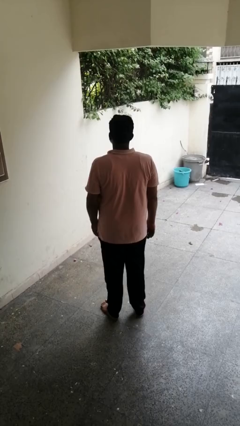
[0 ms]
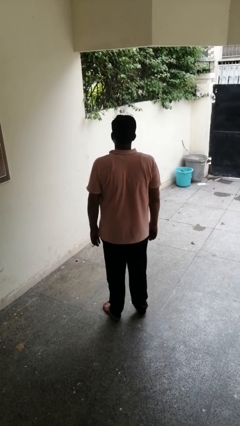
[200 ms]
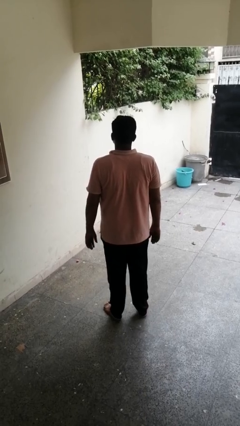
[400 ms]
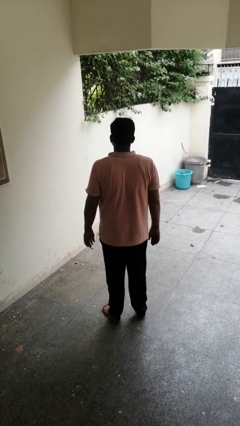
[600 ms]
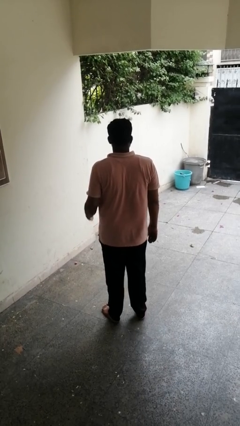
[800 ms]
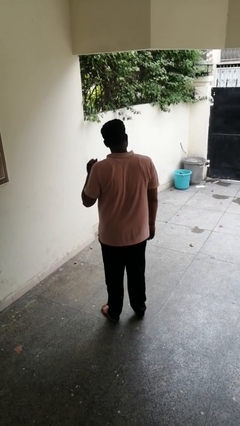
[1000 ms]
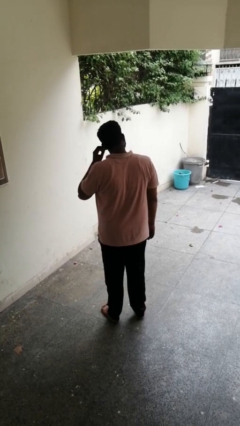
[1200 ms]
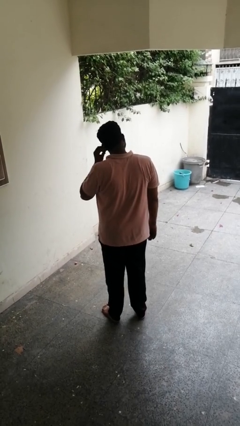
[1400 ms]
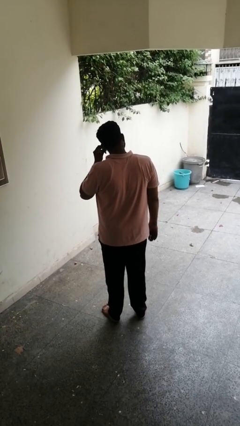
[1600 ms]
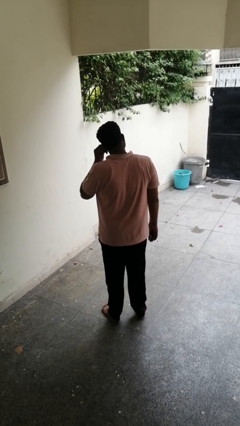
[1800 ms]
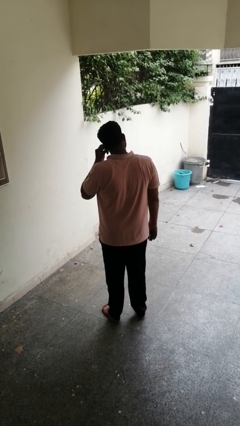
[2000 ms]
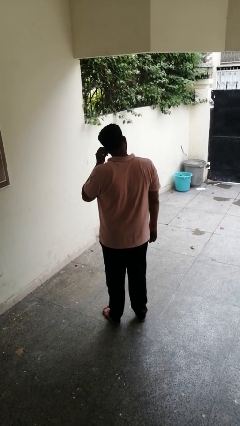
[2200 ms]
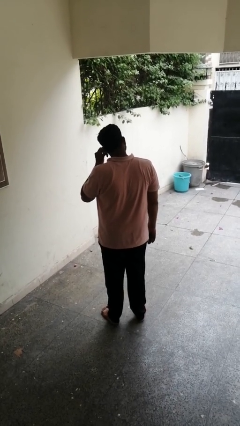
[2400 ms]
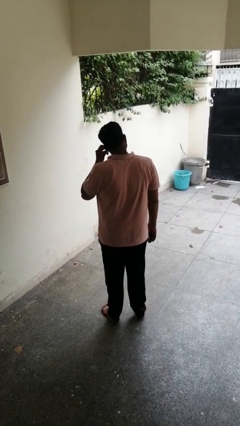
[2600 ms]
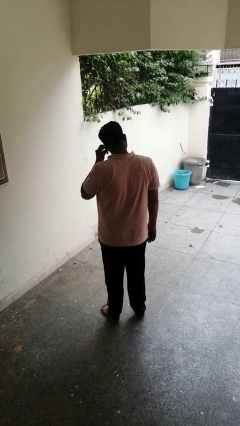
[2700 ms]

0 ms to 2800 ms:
person touches earlobe

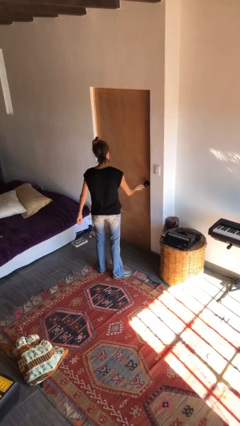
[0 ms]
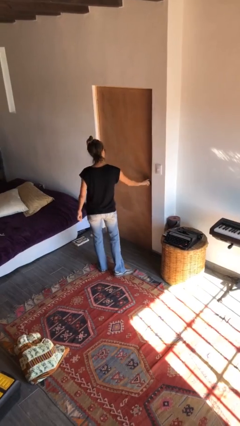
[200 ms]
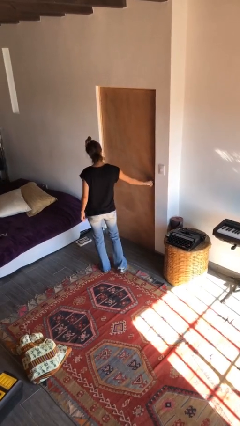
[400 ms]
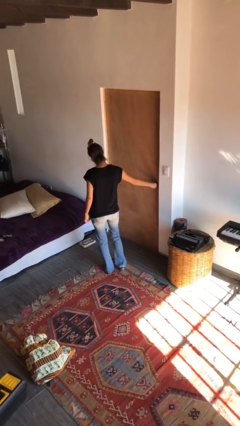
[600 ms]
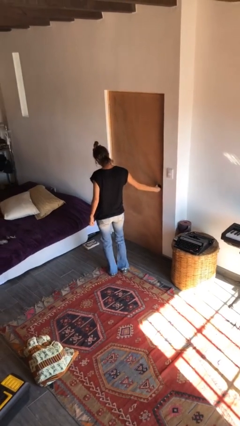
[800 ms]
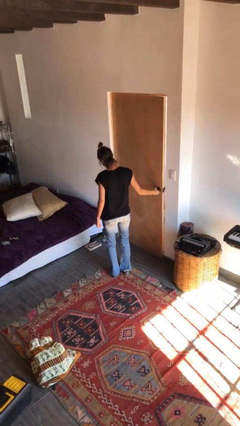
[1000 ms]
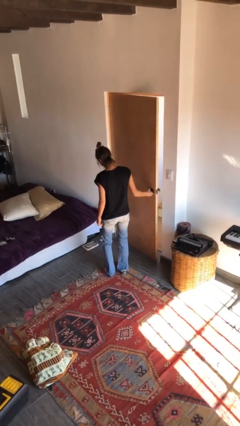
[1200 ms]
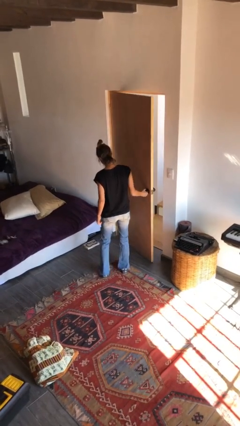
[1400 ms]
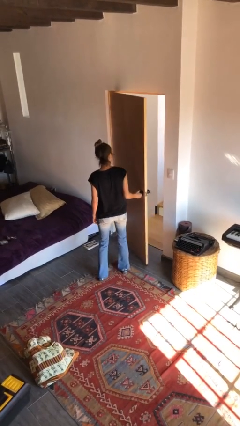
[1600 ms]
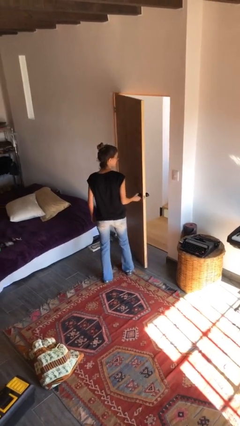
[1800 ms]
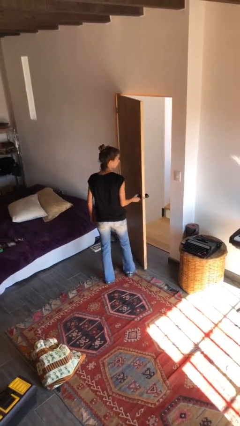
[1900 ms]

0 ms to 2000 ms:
person opens facility door

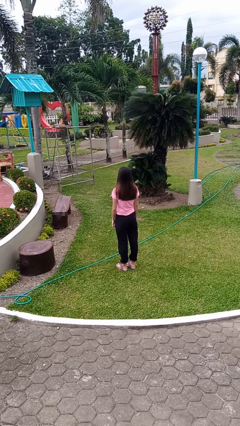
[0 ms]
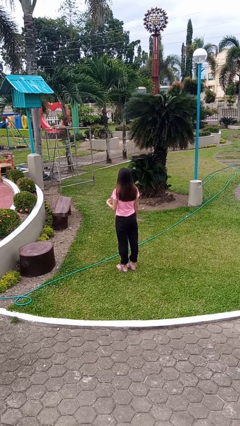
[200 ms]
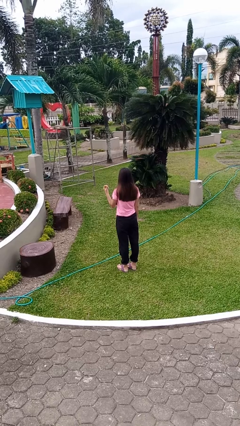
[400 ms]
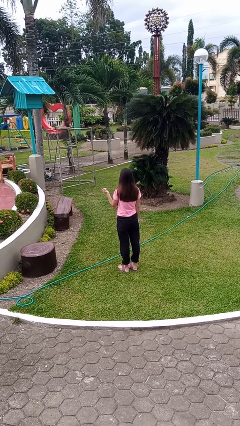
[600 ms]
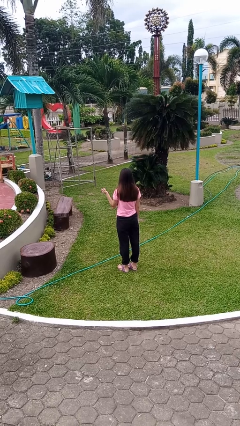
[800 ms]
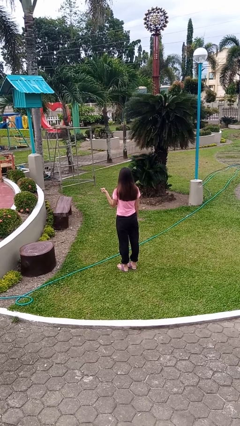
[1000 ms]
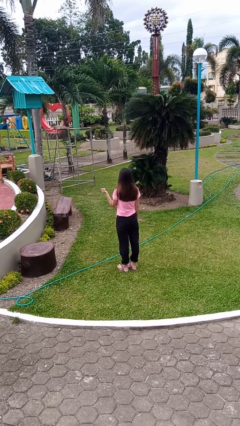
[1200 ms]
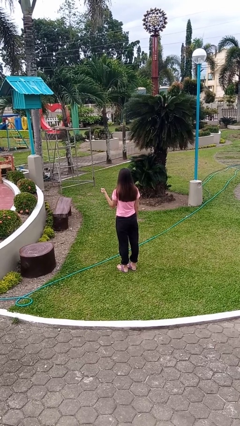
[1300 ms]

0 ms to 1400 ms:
person snaps fingers

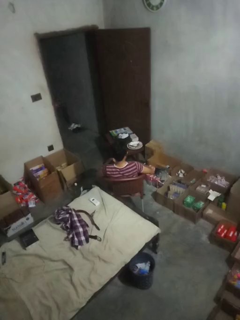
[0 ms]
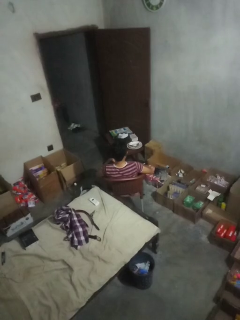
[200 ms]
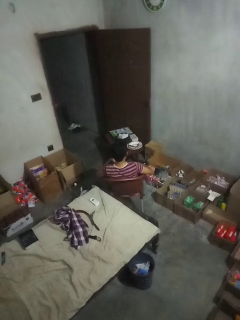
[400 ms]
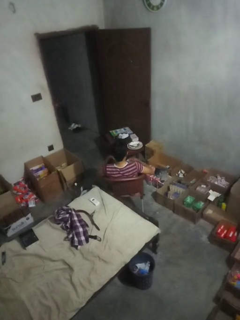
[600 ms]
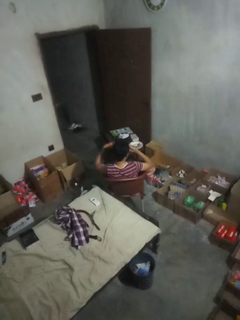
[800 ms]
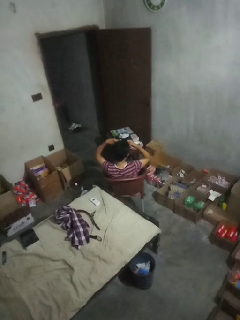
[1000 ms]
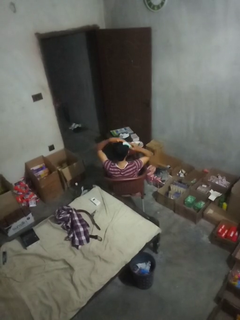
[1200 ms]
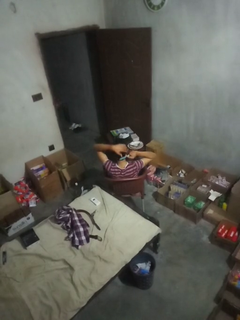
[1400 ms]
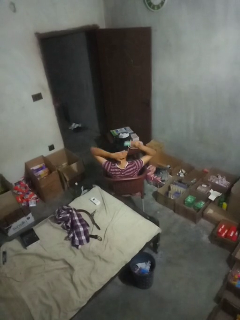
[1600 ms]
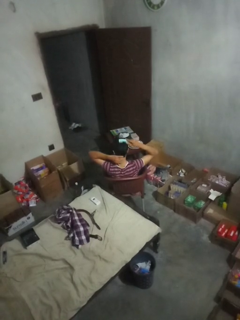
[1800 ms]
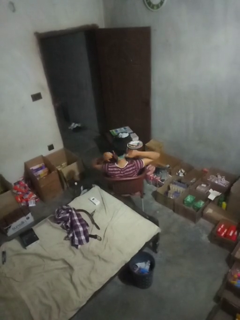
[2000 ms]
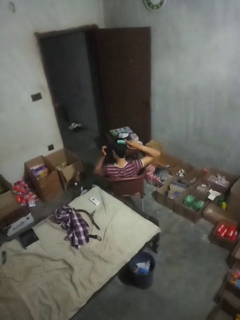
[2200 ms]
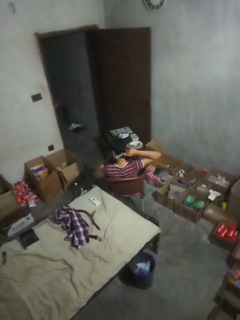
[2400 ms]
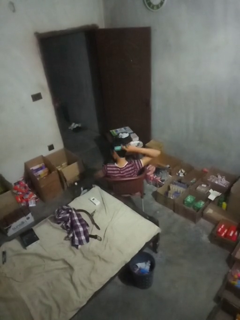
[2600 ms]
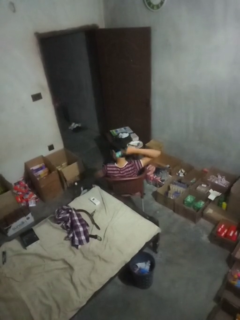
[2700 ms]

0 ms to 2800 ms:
person brushes hair

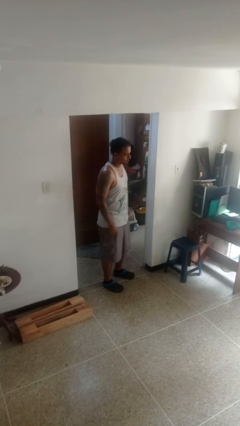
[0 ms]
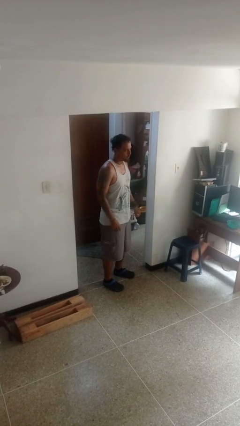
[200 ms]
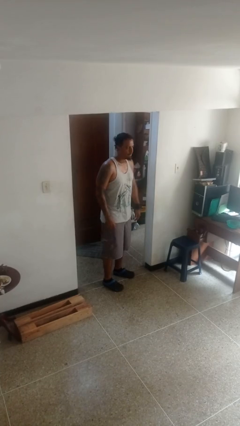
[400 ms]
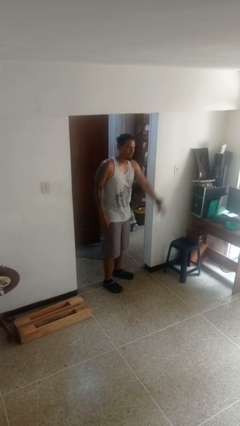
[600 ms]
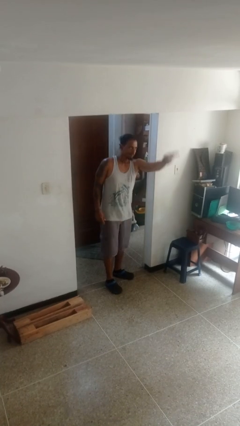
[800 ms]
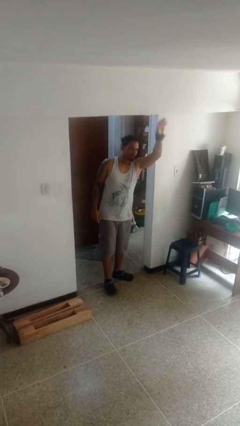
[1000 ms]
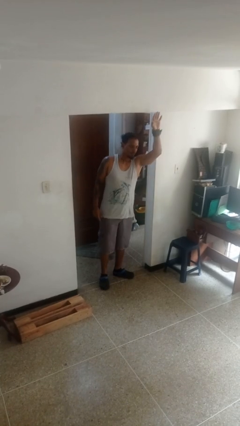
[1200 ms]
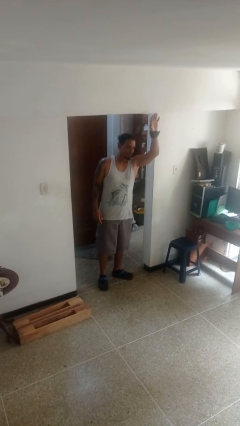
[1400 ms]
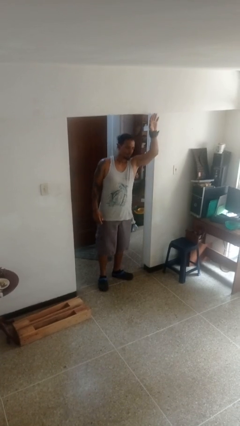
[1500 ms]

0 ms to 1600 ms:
person gestures swipe up

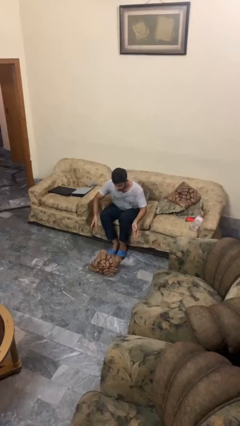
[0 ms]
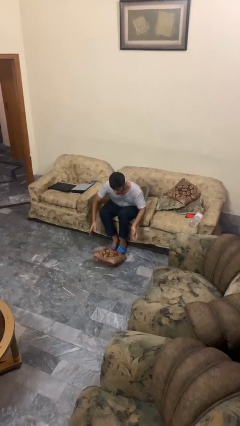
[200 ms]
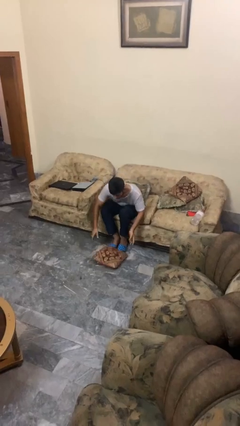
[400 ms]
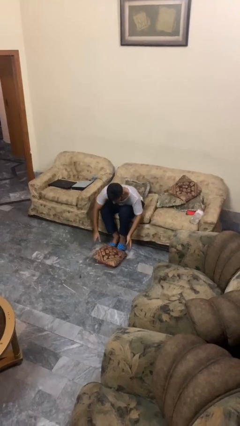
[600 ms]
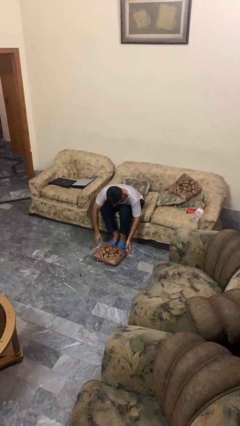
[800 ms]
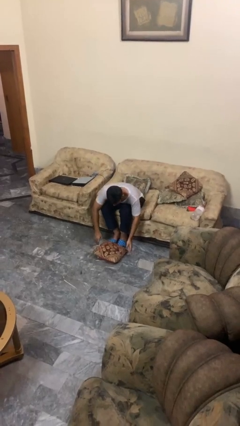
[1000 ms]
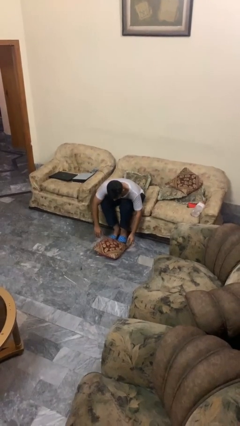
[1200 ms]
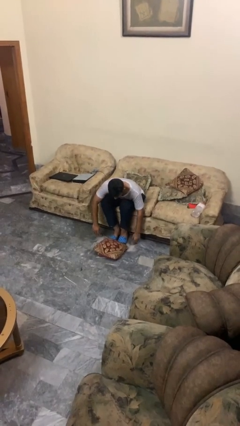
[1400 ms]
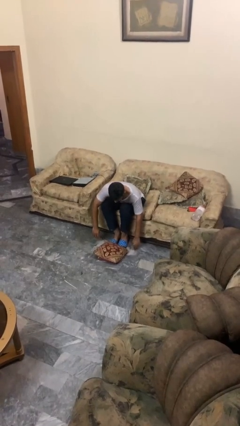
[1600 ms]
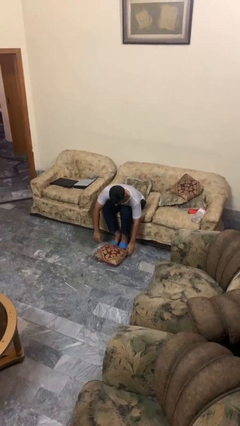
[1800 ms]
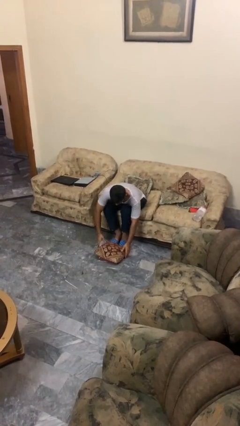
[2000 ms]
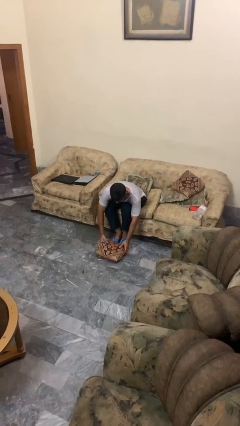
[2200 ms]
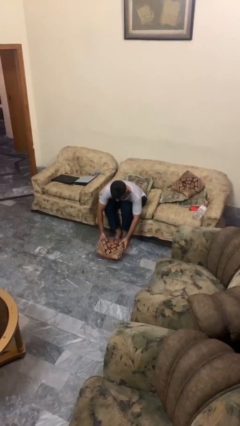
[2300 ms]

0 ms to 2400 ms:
person drops object

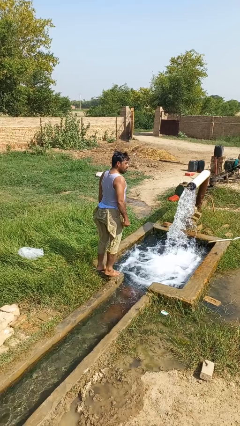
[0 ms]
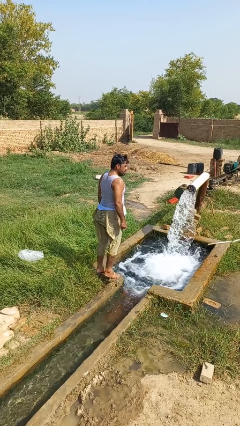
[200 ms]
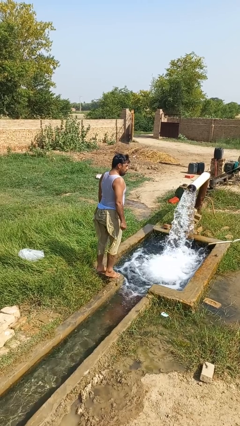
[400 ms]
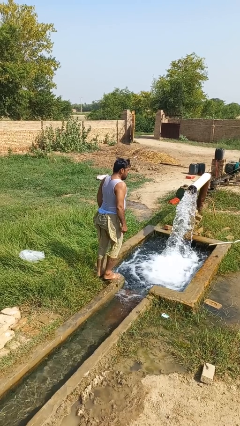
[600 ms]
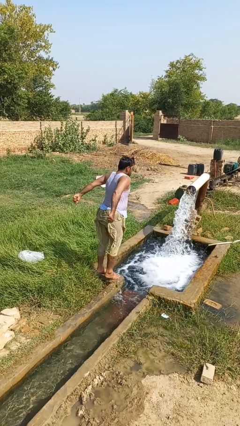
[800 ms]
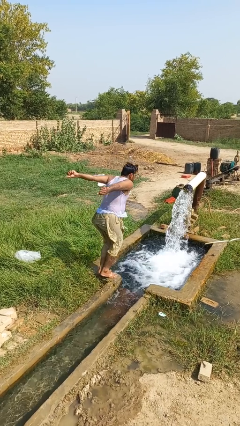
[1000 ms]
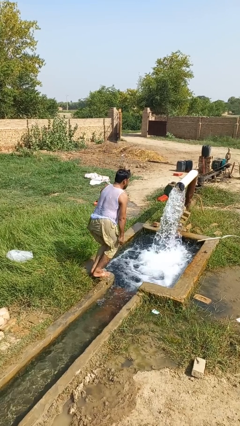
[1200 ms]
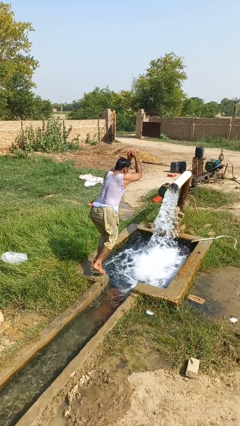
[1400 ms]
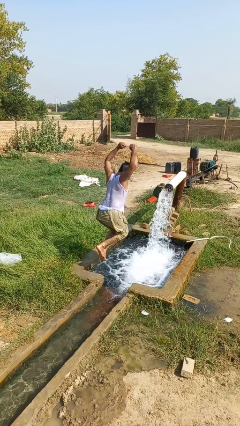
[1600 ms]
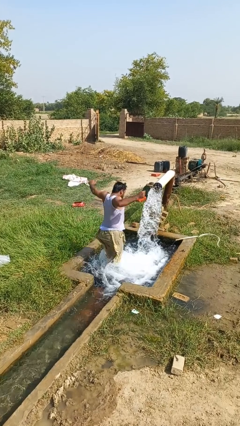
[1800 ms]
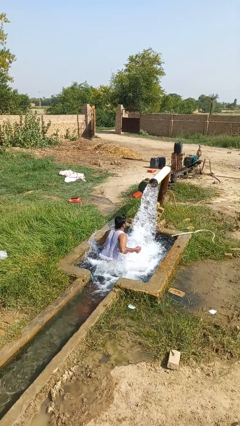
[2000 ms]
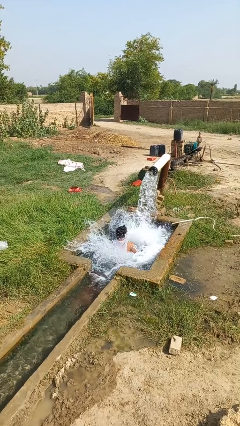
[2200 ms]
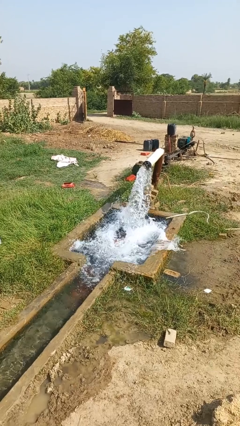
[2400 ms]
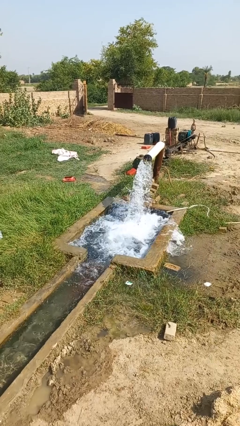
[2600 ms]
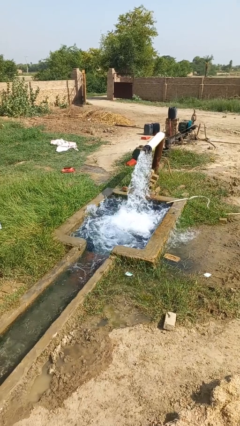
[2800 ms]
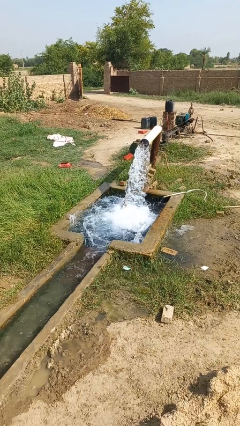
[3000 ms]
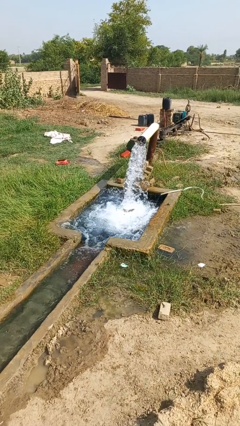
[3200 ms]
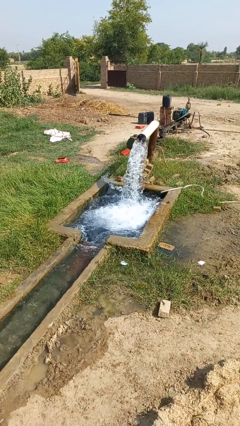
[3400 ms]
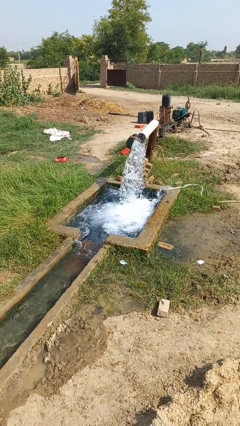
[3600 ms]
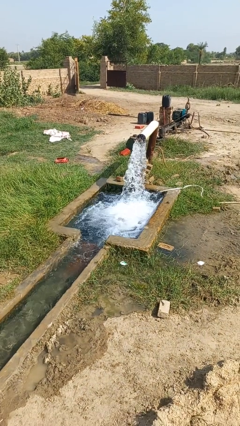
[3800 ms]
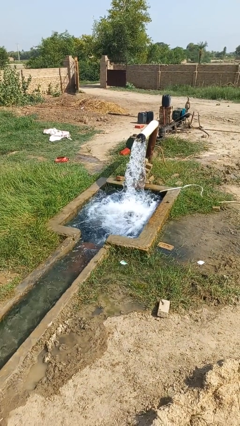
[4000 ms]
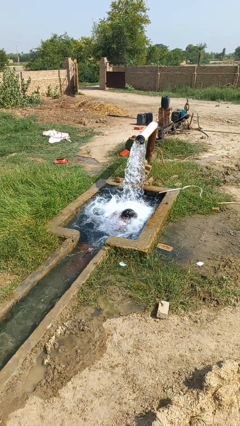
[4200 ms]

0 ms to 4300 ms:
person jumps into pool

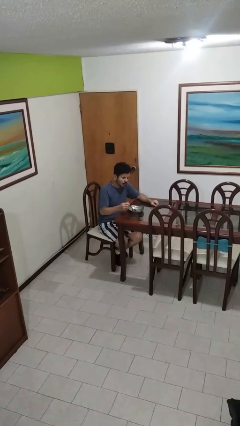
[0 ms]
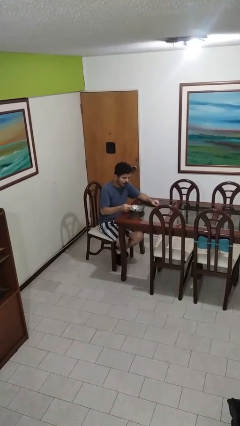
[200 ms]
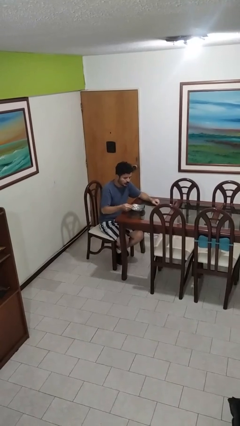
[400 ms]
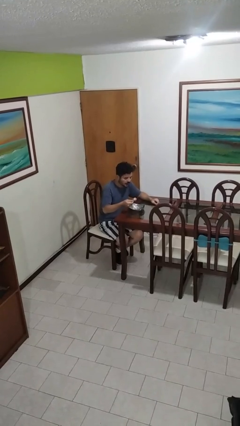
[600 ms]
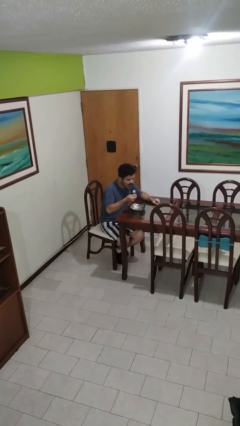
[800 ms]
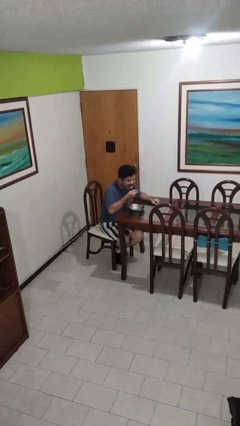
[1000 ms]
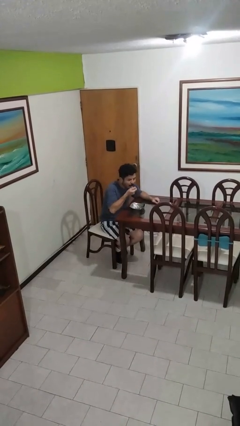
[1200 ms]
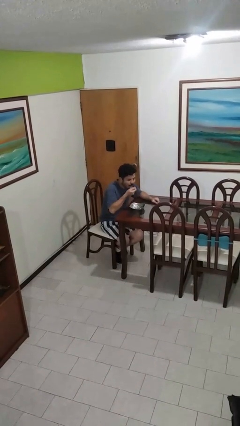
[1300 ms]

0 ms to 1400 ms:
person eats with utensil
